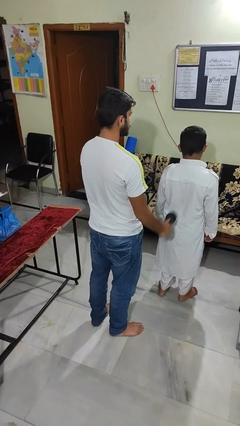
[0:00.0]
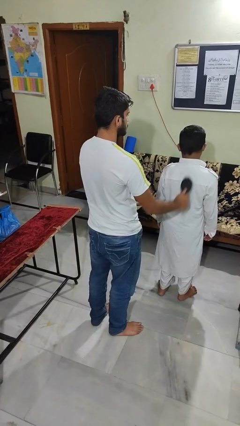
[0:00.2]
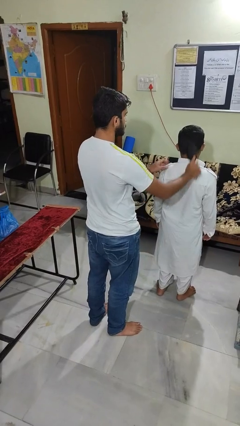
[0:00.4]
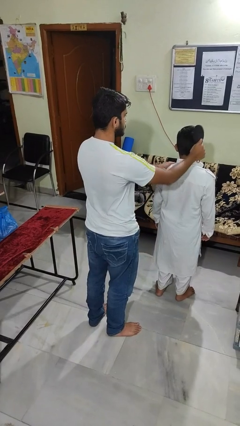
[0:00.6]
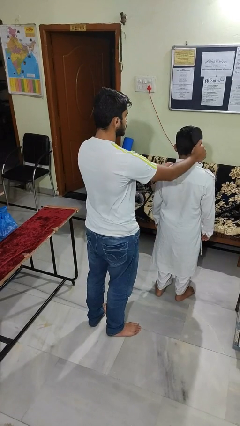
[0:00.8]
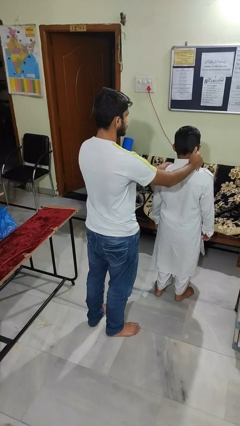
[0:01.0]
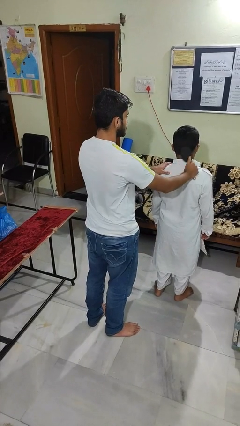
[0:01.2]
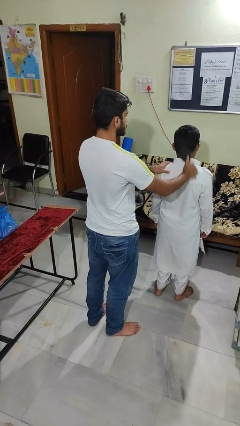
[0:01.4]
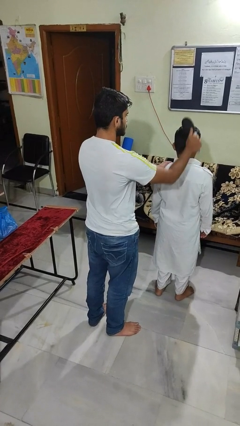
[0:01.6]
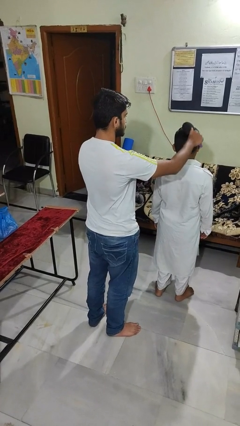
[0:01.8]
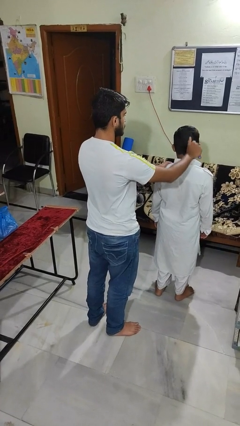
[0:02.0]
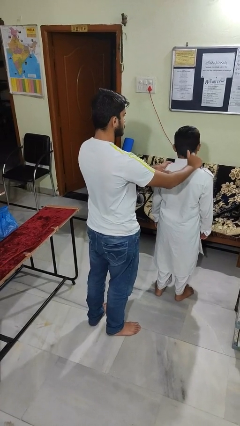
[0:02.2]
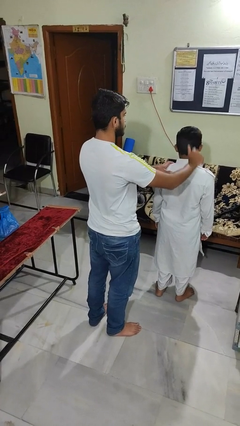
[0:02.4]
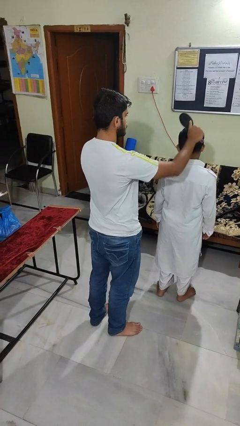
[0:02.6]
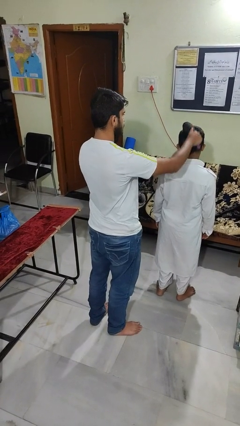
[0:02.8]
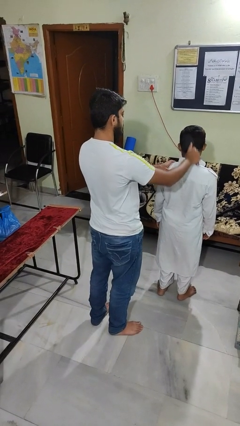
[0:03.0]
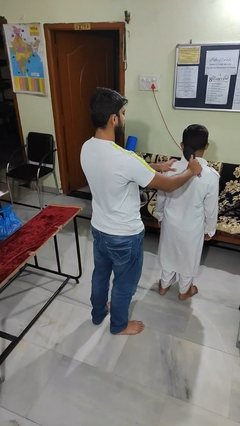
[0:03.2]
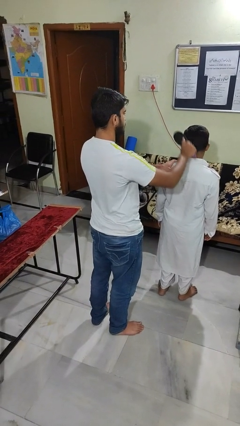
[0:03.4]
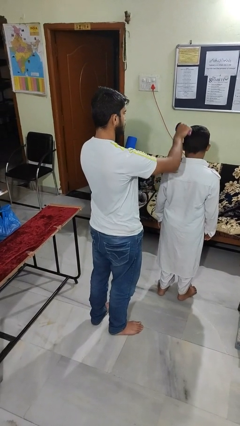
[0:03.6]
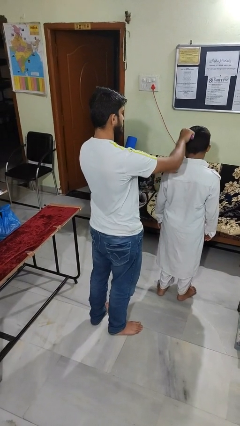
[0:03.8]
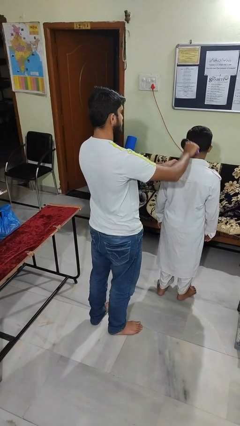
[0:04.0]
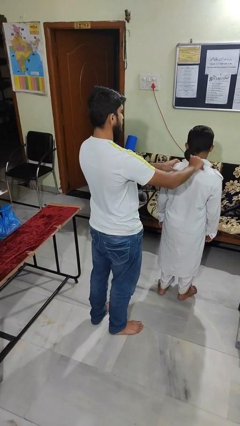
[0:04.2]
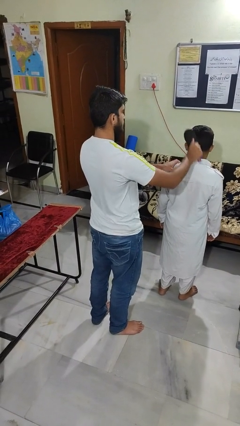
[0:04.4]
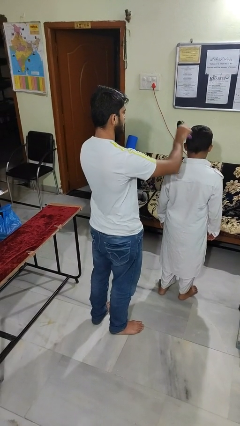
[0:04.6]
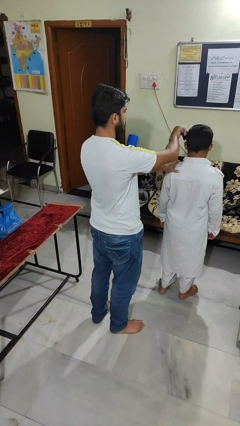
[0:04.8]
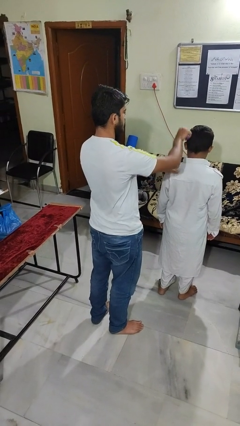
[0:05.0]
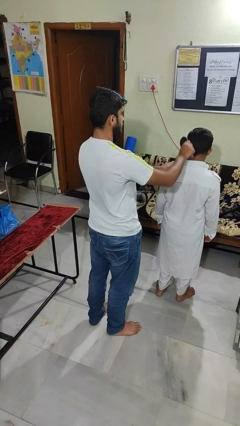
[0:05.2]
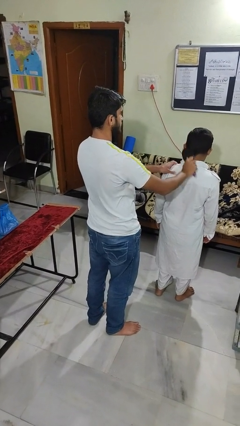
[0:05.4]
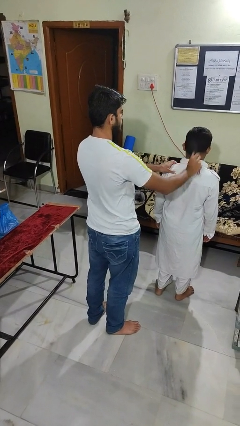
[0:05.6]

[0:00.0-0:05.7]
person brushes hair of person

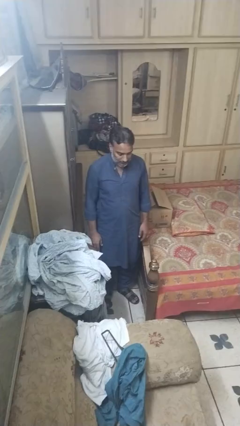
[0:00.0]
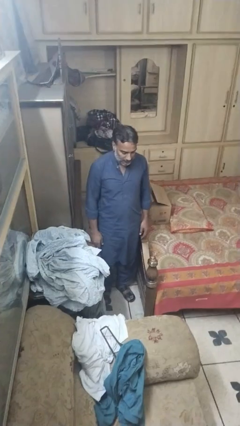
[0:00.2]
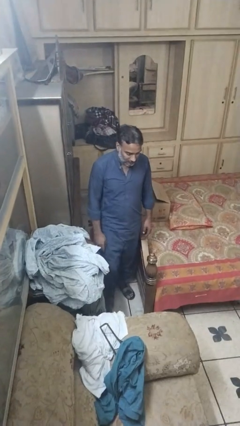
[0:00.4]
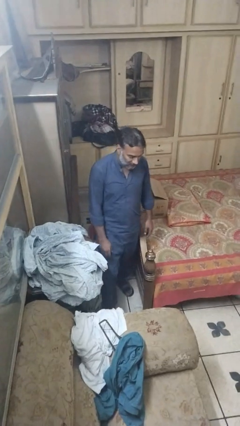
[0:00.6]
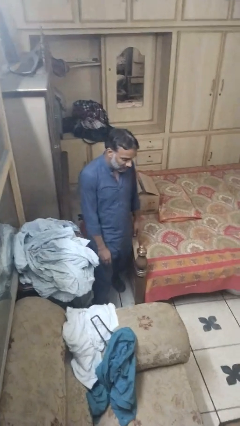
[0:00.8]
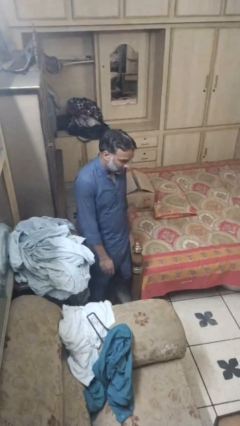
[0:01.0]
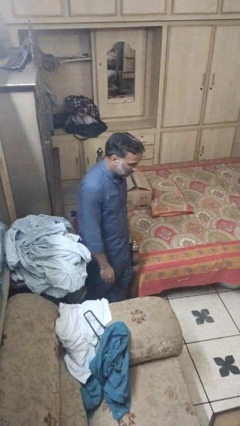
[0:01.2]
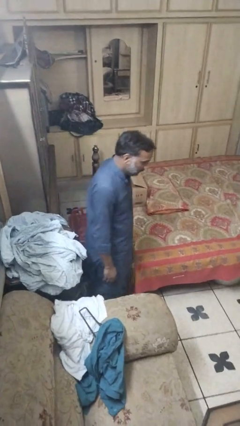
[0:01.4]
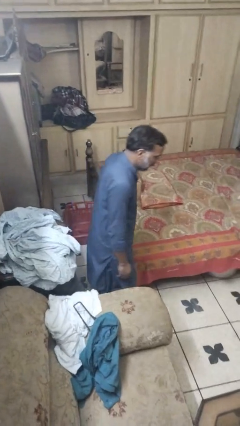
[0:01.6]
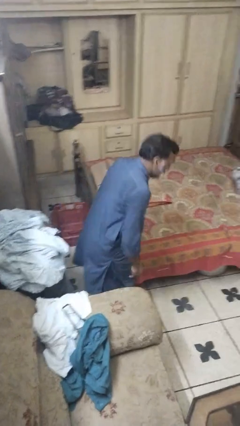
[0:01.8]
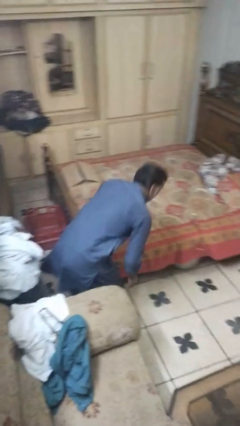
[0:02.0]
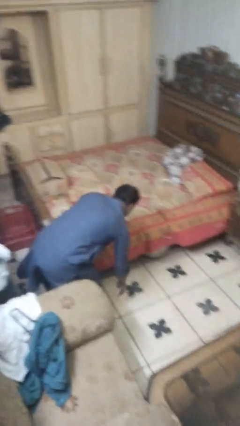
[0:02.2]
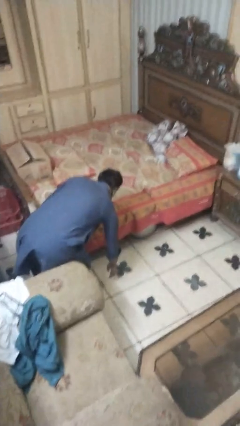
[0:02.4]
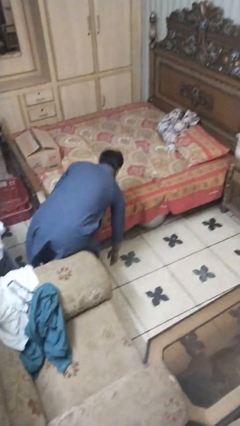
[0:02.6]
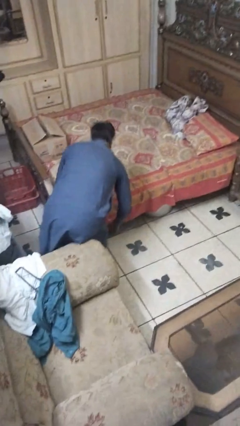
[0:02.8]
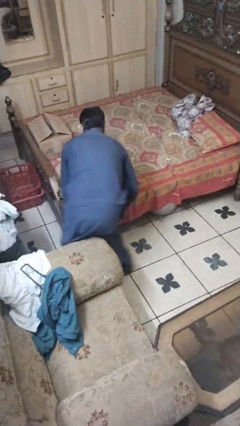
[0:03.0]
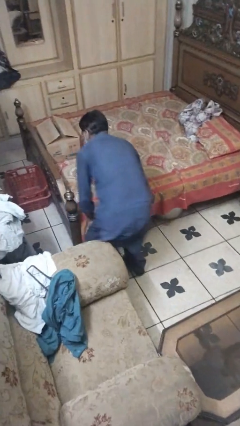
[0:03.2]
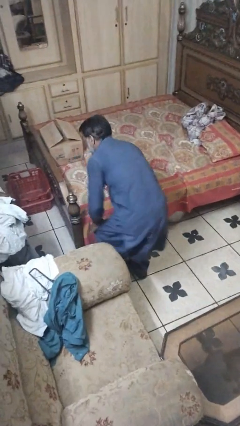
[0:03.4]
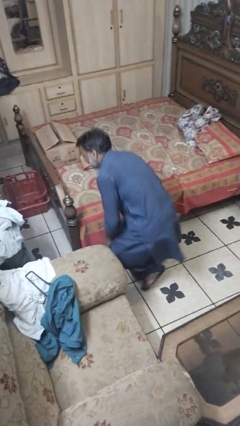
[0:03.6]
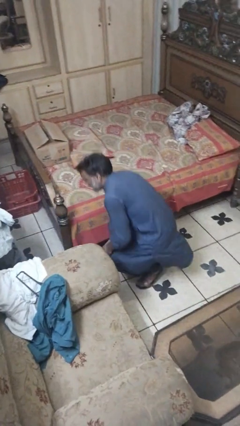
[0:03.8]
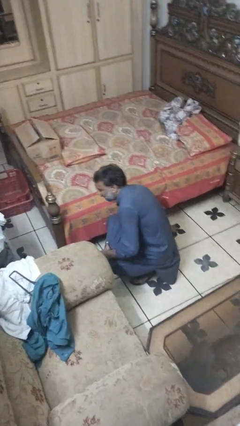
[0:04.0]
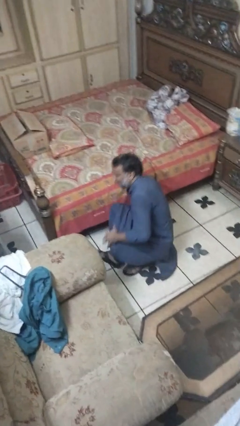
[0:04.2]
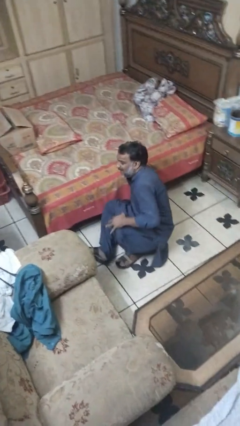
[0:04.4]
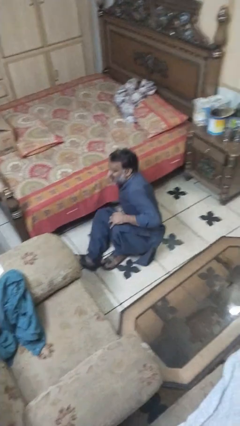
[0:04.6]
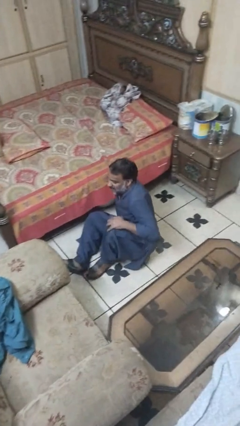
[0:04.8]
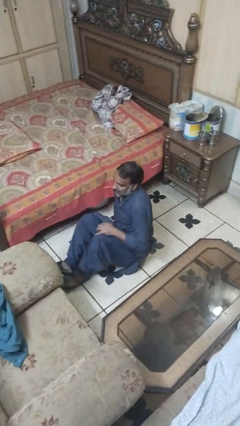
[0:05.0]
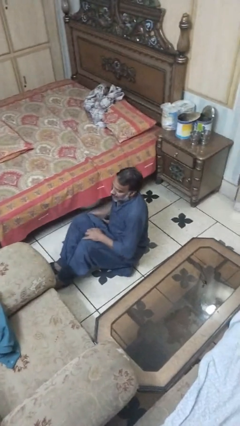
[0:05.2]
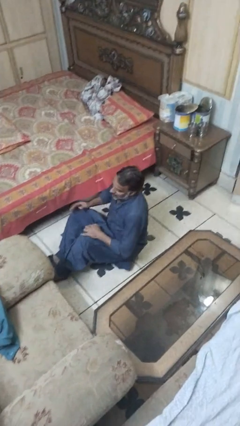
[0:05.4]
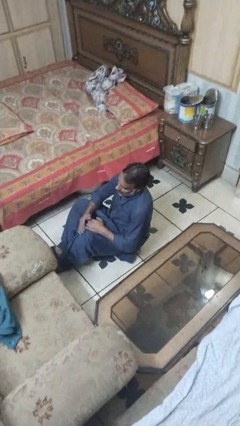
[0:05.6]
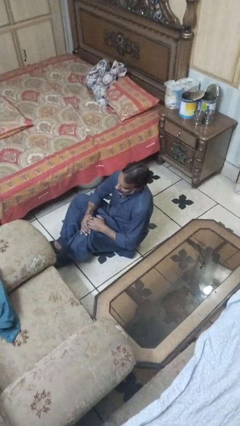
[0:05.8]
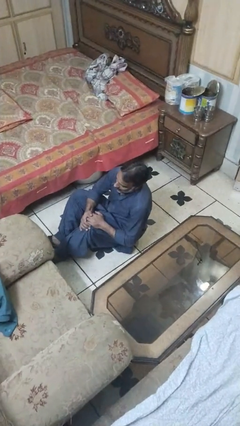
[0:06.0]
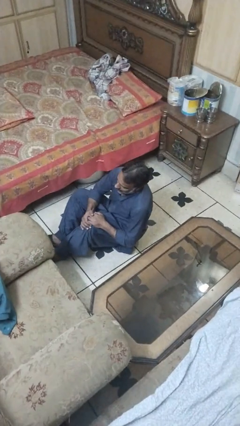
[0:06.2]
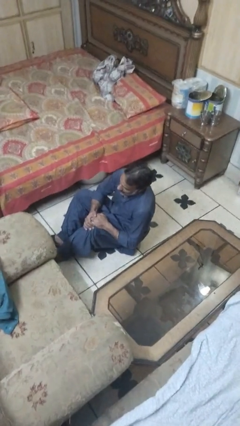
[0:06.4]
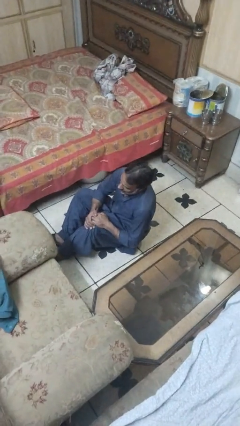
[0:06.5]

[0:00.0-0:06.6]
person trips on object on floor

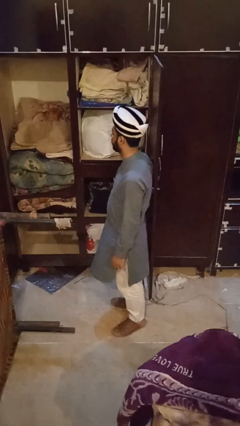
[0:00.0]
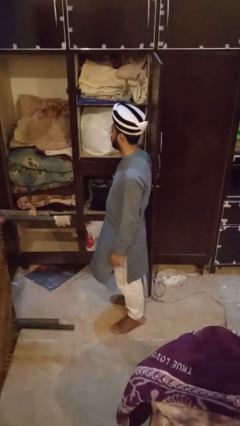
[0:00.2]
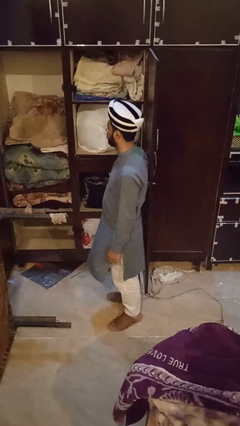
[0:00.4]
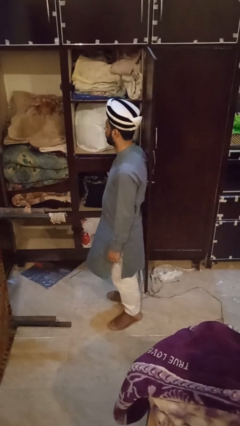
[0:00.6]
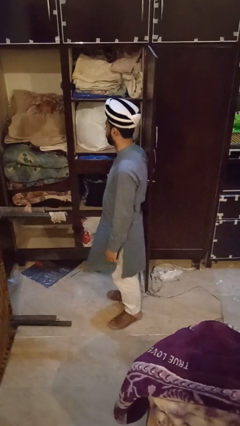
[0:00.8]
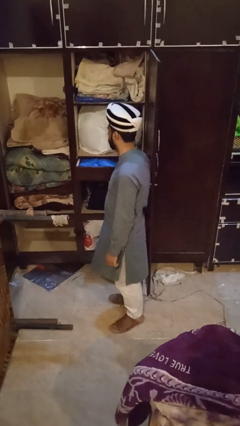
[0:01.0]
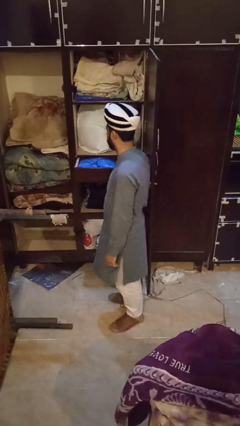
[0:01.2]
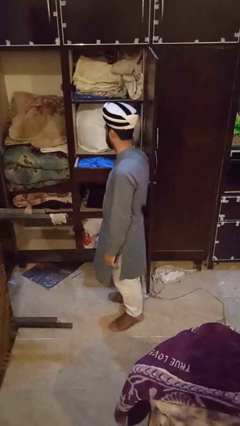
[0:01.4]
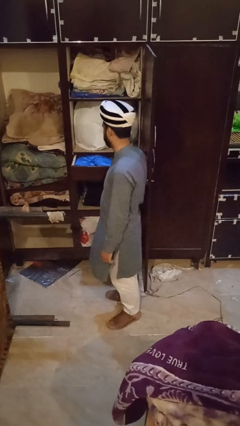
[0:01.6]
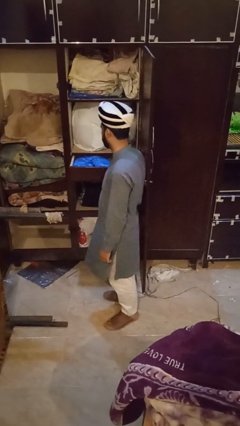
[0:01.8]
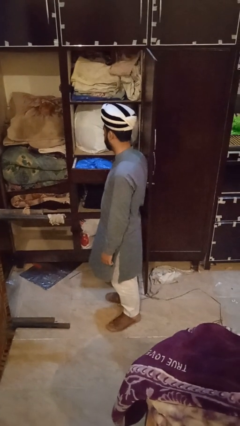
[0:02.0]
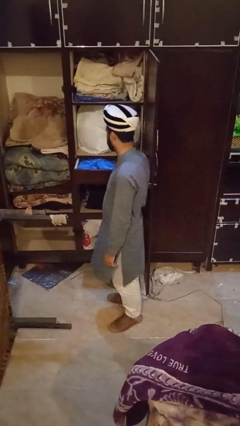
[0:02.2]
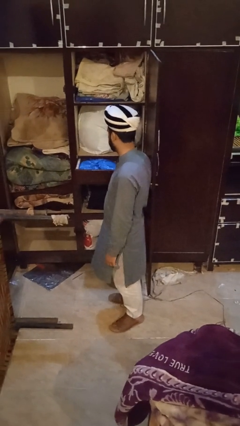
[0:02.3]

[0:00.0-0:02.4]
person opens dresser drawer

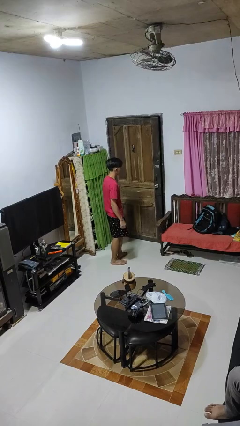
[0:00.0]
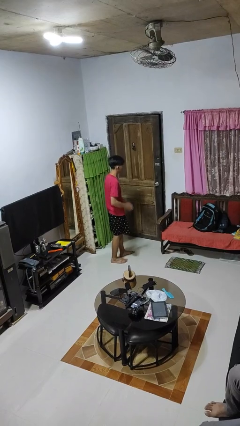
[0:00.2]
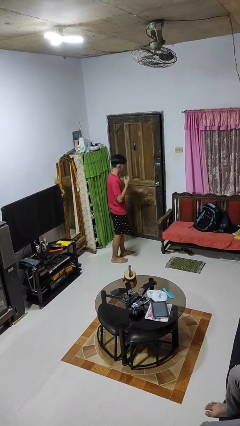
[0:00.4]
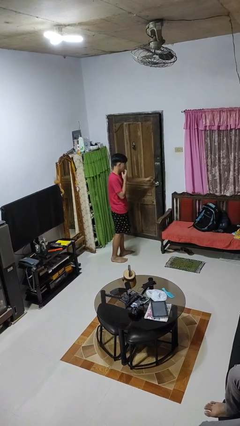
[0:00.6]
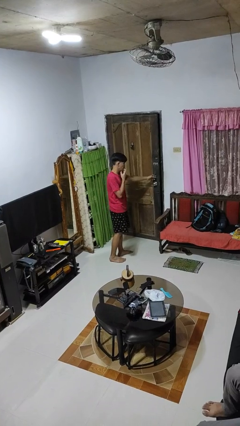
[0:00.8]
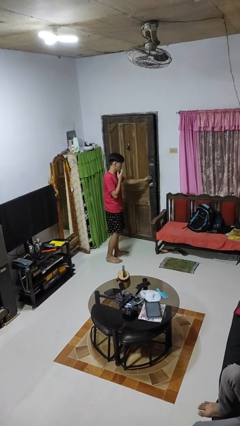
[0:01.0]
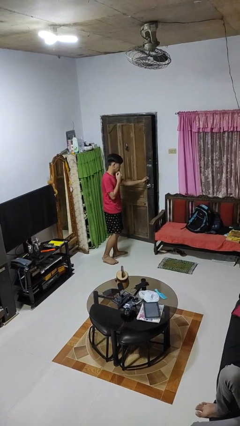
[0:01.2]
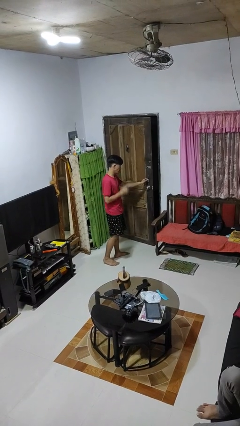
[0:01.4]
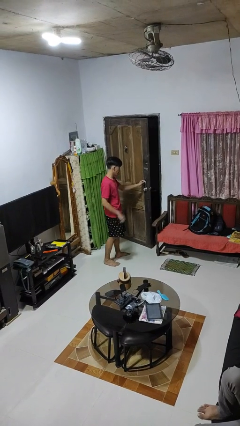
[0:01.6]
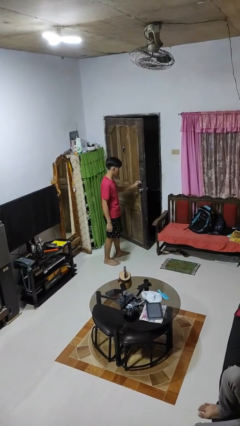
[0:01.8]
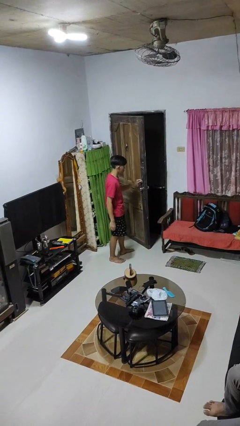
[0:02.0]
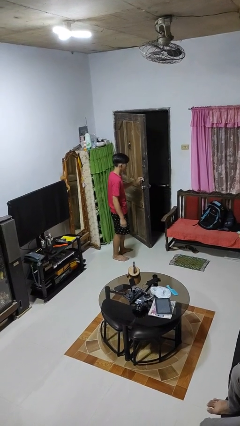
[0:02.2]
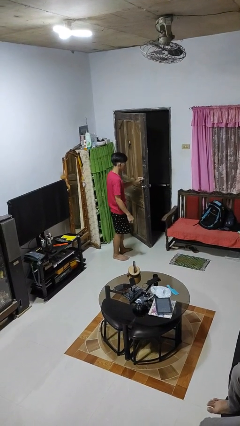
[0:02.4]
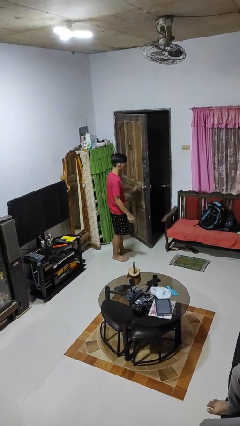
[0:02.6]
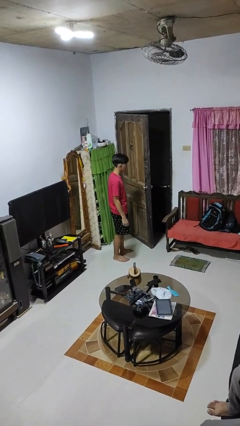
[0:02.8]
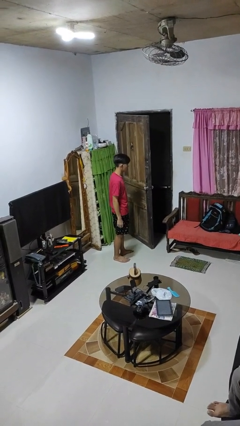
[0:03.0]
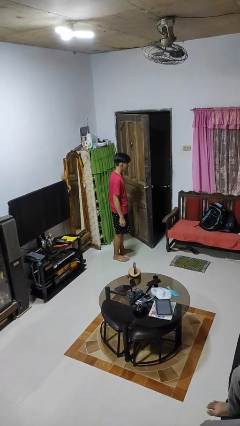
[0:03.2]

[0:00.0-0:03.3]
person opens facility door
